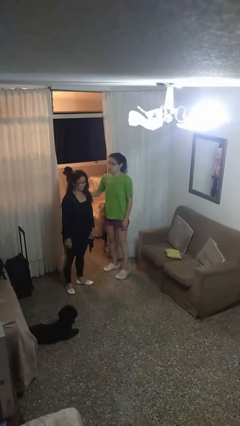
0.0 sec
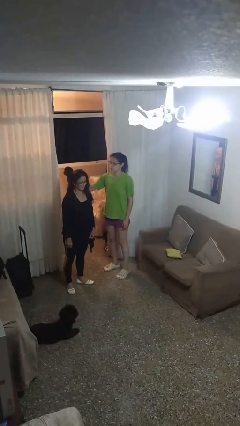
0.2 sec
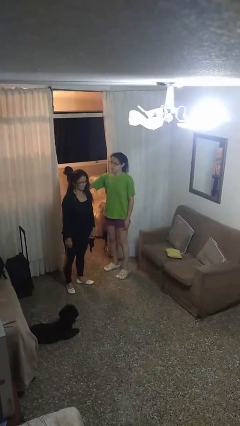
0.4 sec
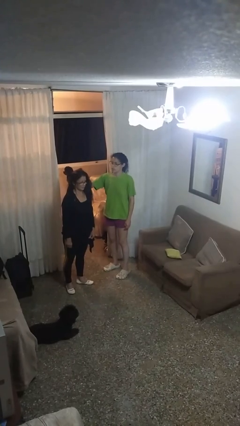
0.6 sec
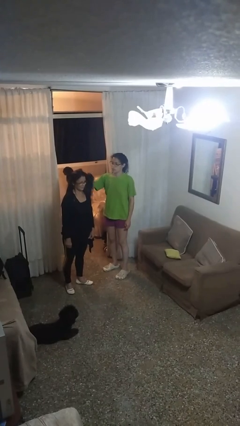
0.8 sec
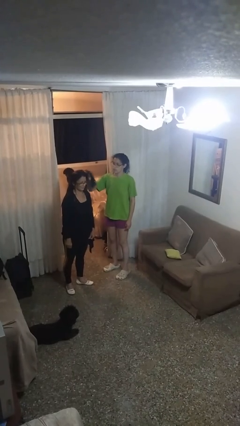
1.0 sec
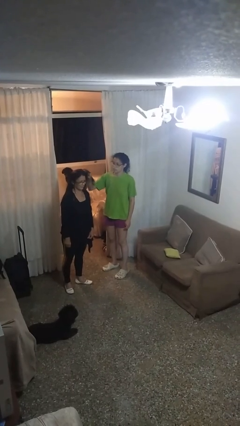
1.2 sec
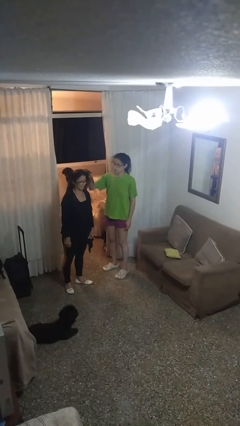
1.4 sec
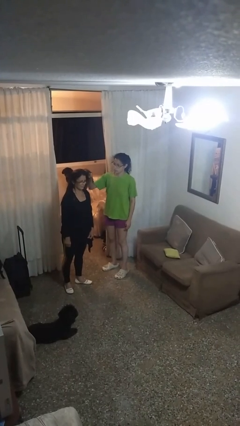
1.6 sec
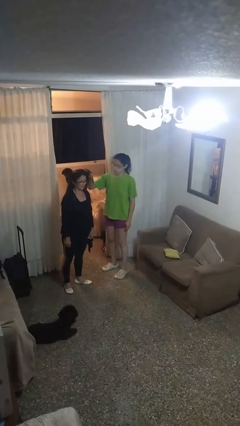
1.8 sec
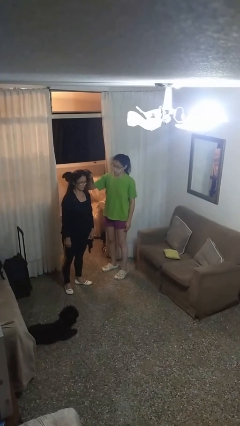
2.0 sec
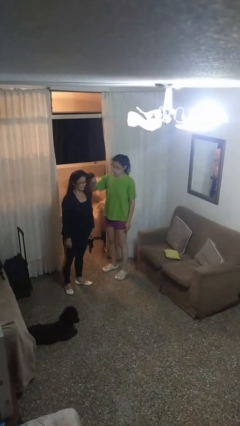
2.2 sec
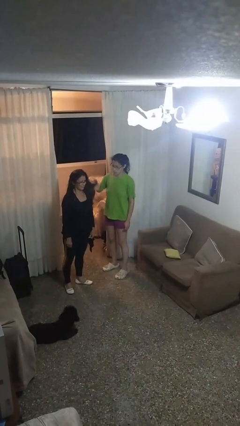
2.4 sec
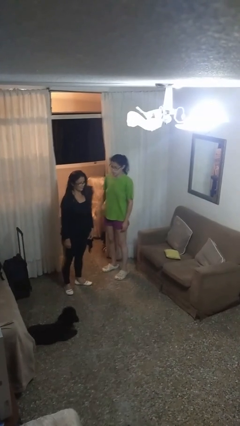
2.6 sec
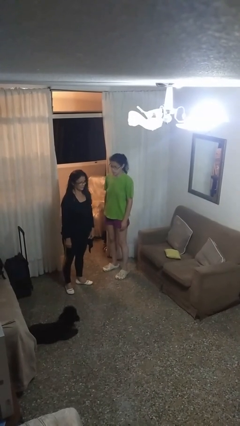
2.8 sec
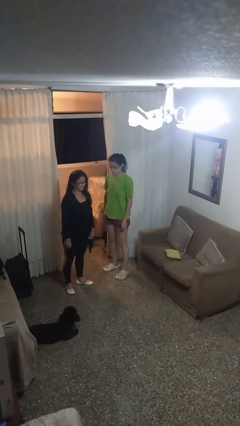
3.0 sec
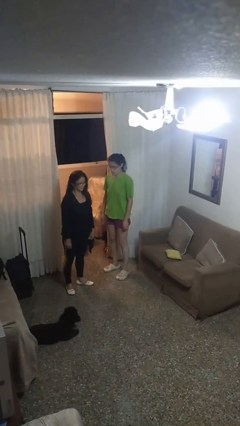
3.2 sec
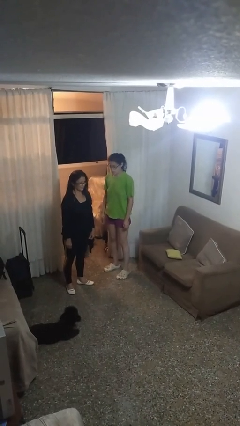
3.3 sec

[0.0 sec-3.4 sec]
person grabs person by hair

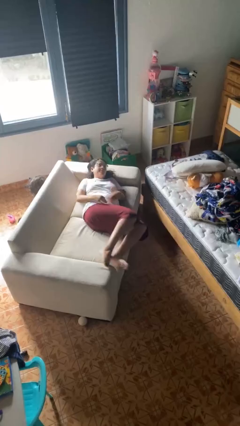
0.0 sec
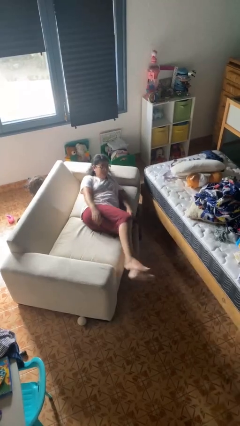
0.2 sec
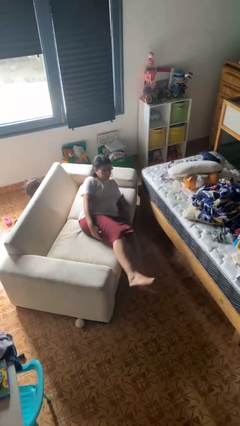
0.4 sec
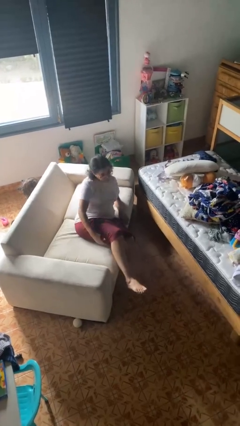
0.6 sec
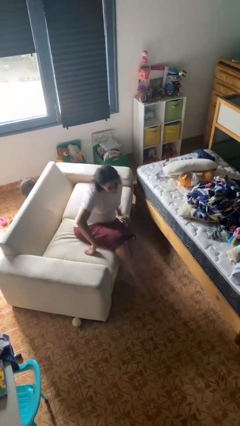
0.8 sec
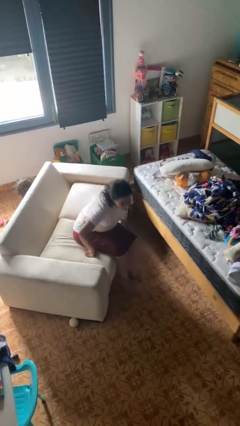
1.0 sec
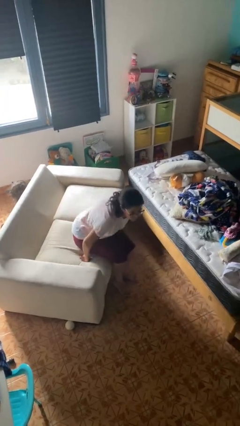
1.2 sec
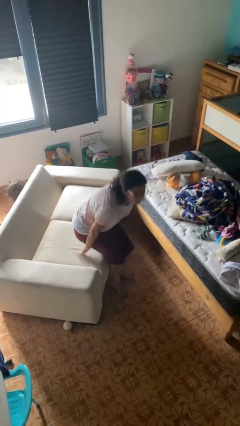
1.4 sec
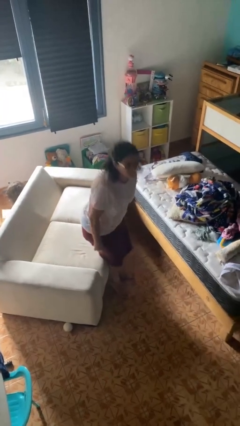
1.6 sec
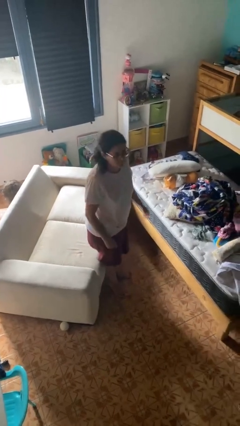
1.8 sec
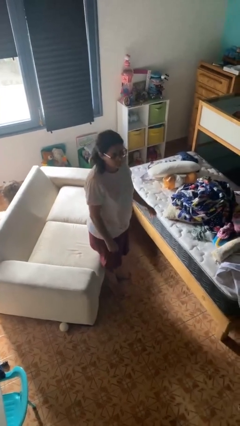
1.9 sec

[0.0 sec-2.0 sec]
person stands up

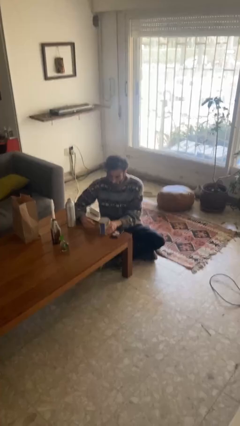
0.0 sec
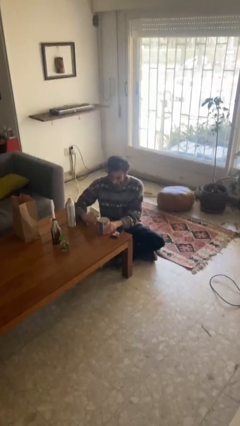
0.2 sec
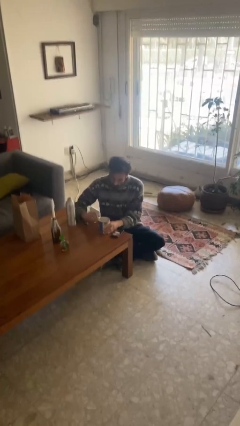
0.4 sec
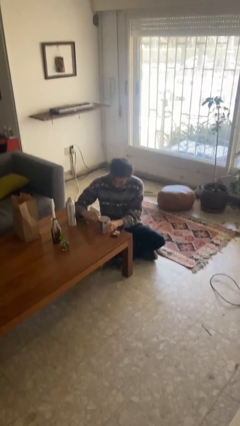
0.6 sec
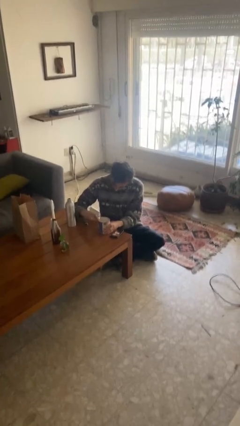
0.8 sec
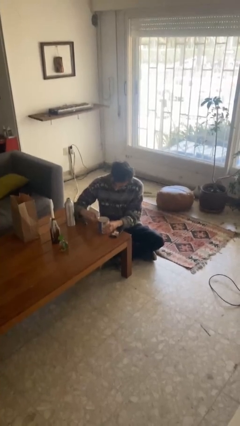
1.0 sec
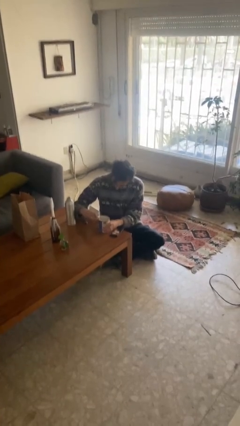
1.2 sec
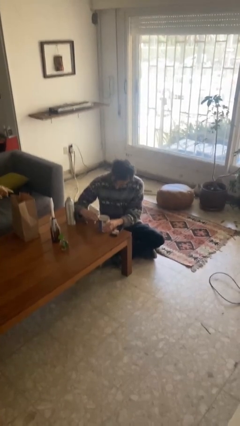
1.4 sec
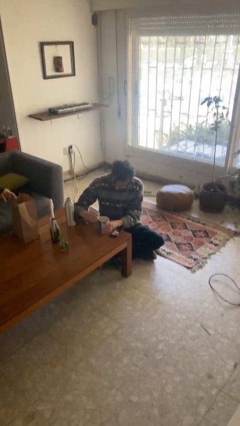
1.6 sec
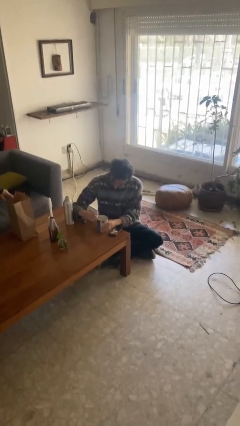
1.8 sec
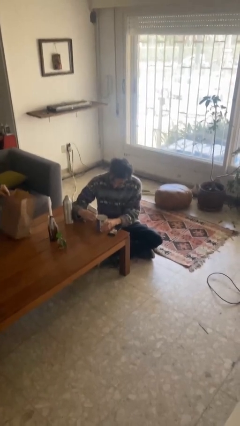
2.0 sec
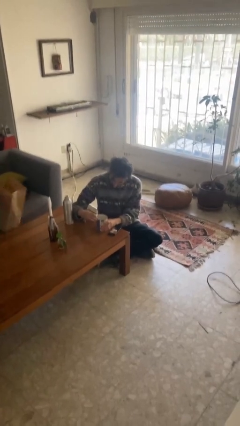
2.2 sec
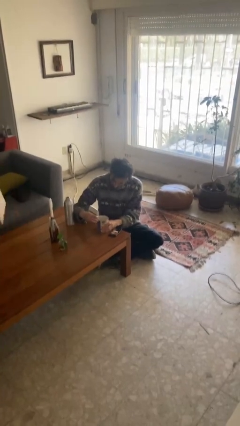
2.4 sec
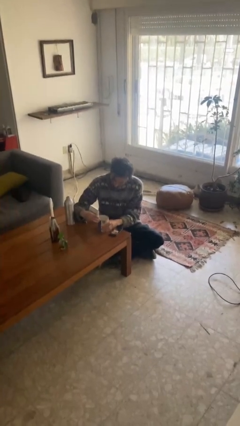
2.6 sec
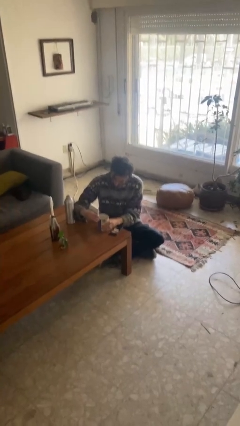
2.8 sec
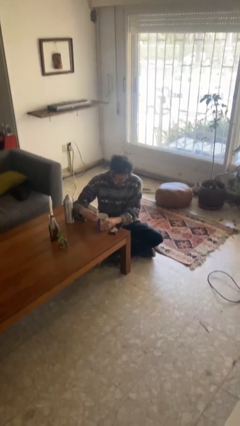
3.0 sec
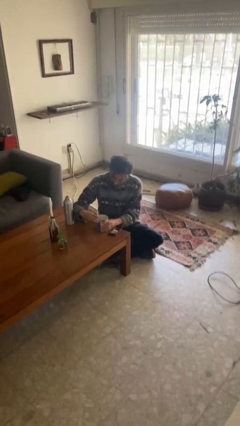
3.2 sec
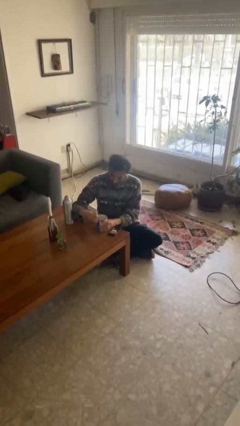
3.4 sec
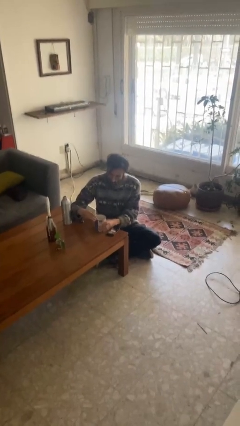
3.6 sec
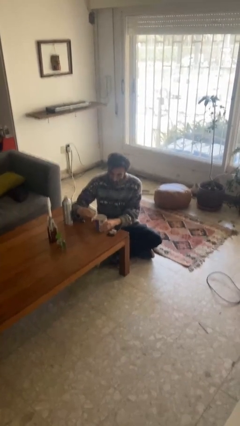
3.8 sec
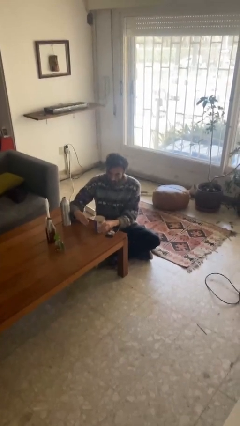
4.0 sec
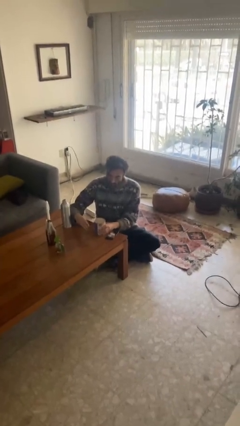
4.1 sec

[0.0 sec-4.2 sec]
person opens can with can opener

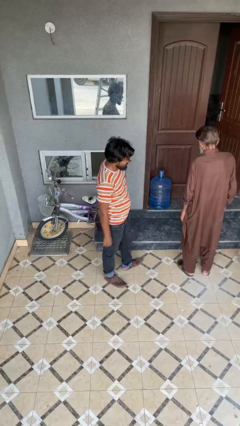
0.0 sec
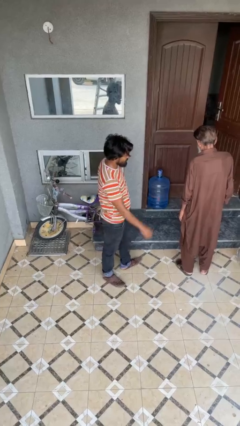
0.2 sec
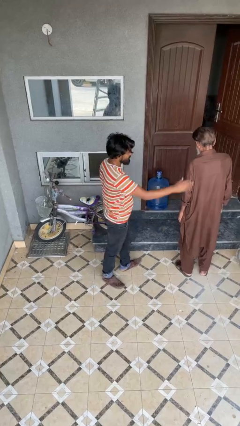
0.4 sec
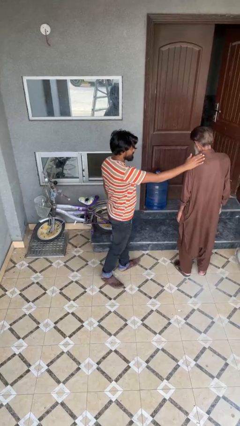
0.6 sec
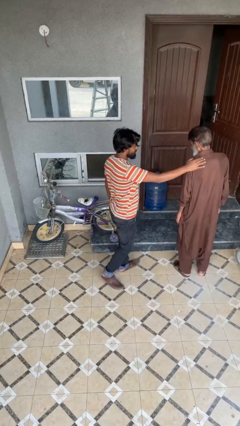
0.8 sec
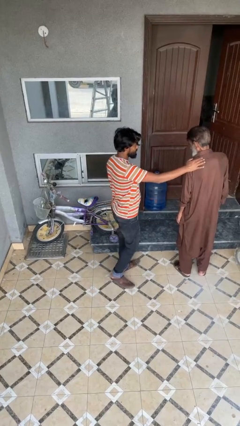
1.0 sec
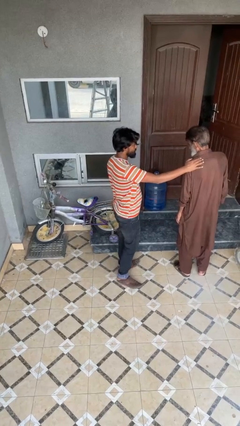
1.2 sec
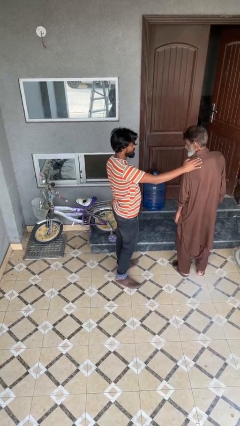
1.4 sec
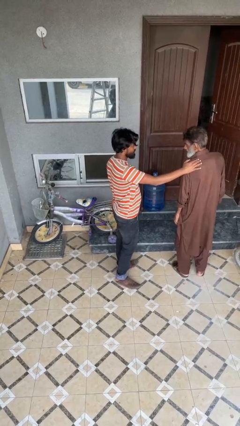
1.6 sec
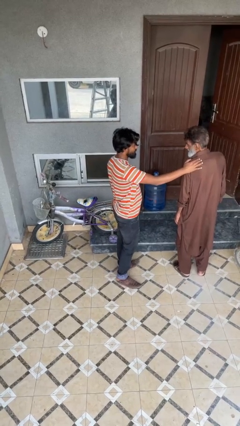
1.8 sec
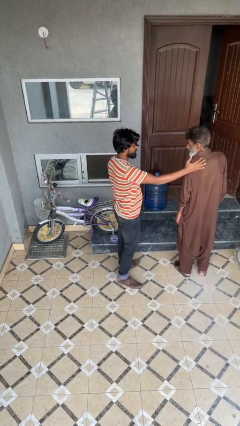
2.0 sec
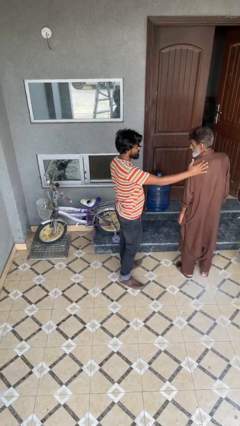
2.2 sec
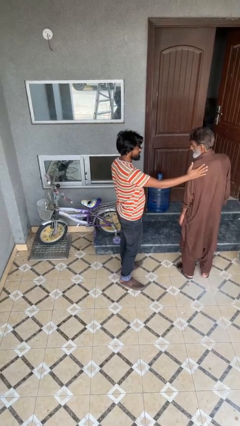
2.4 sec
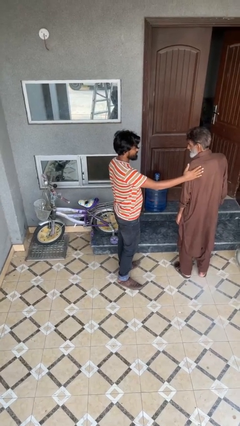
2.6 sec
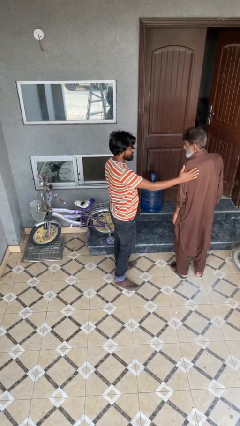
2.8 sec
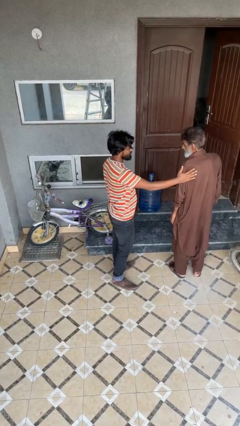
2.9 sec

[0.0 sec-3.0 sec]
person touches back of person

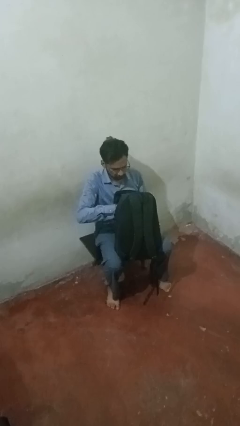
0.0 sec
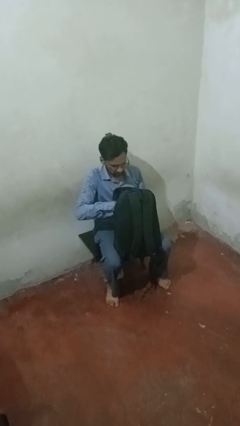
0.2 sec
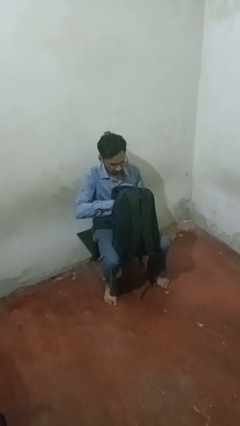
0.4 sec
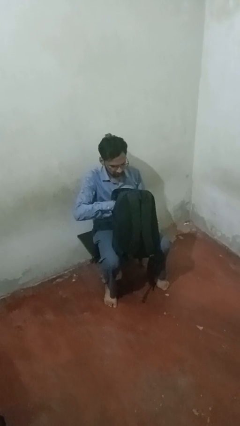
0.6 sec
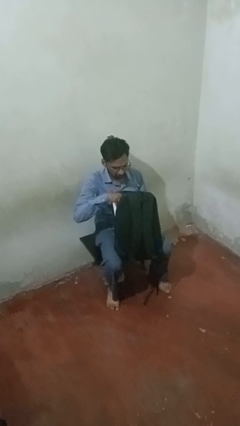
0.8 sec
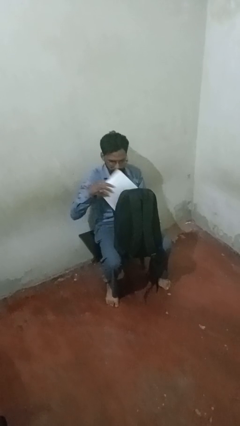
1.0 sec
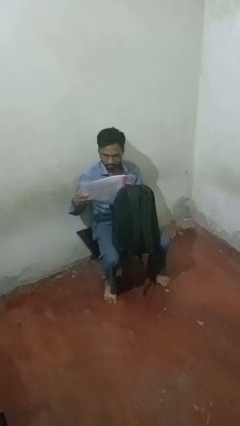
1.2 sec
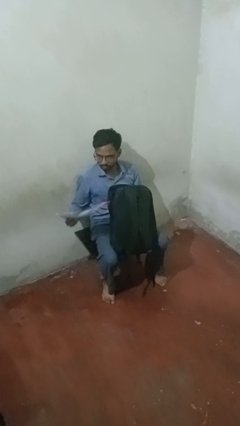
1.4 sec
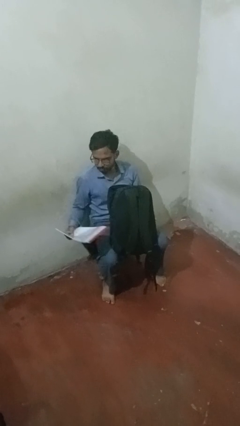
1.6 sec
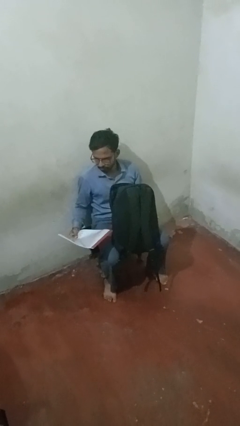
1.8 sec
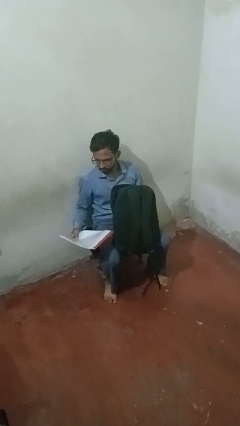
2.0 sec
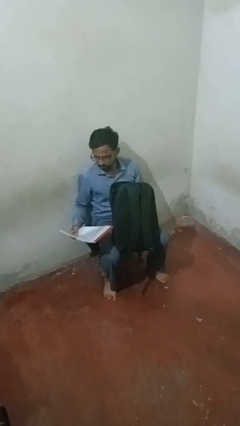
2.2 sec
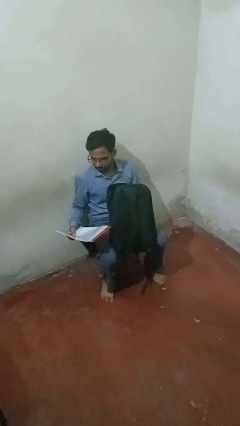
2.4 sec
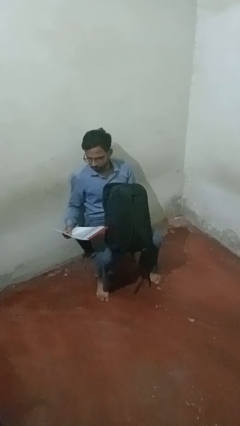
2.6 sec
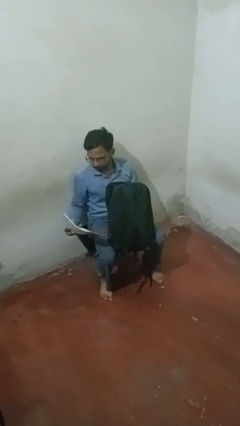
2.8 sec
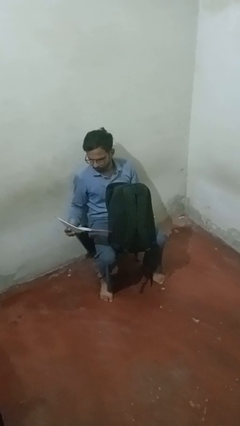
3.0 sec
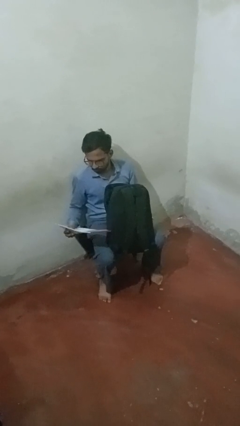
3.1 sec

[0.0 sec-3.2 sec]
person takes object from purse

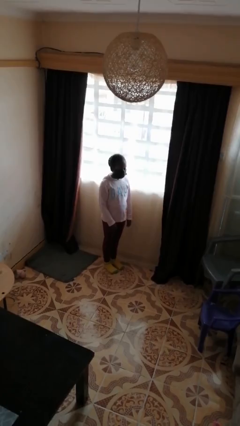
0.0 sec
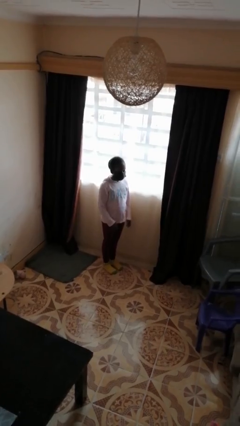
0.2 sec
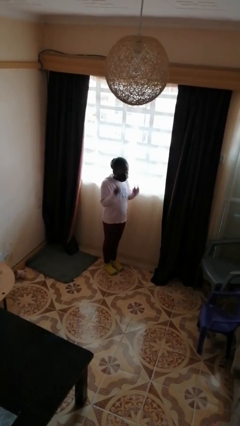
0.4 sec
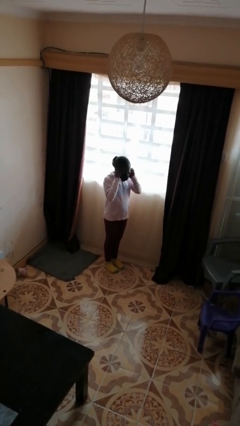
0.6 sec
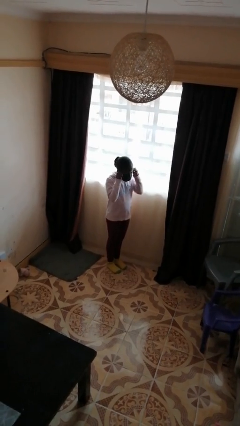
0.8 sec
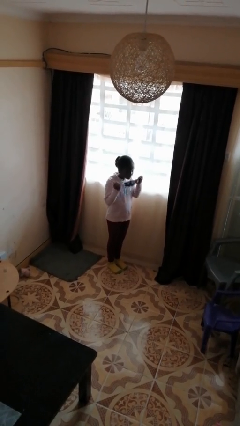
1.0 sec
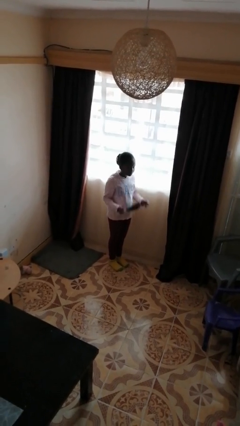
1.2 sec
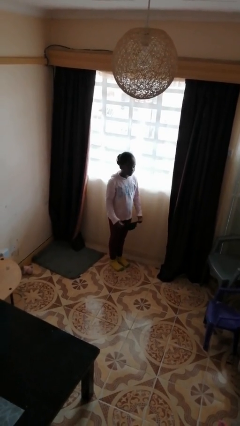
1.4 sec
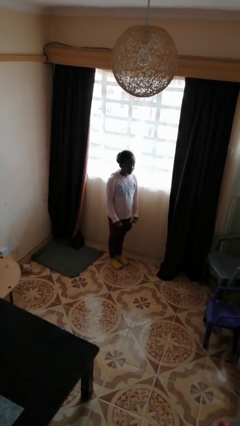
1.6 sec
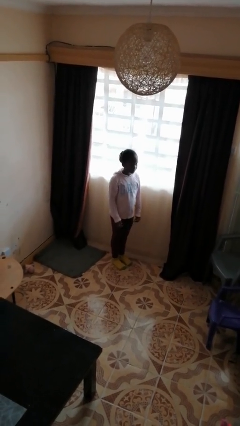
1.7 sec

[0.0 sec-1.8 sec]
person takes off facemask
